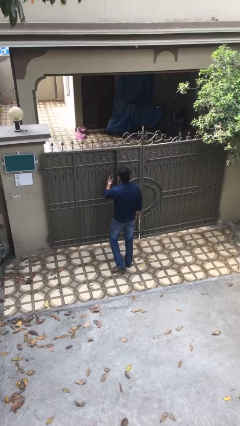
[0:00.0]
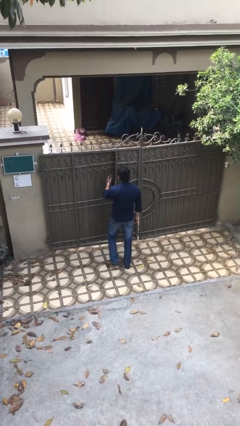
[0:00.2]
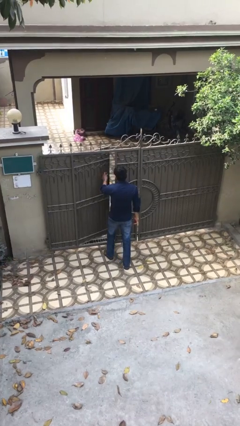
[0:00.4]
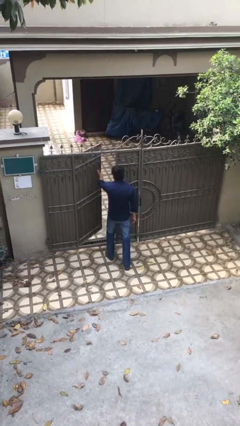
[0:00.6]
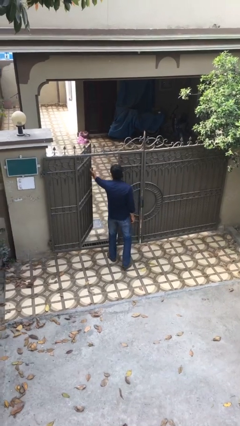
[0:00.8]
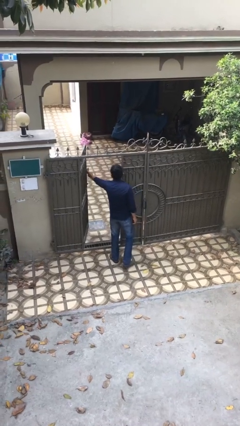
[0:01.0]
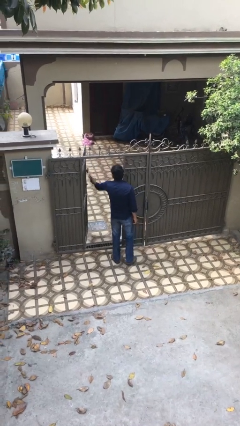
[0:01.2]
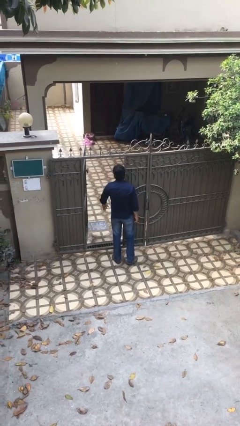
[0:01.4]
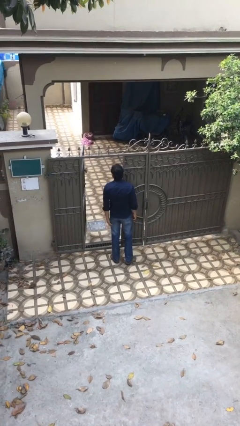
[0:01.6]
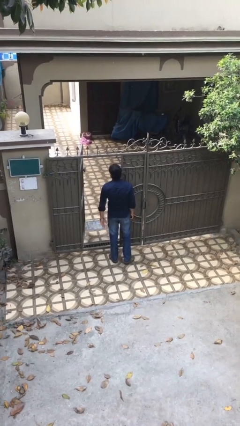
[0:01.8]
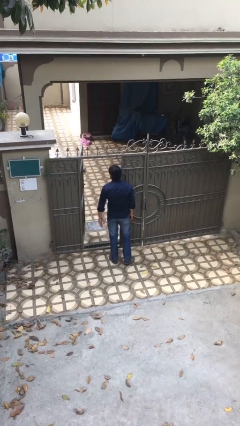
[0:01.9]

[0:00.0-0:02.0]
person opens facility door

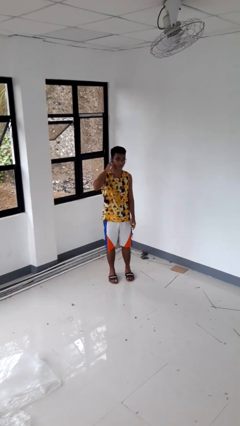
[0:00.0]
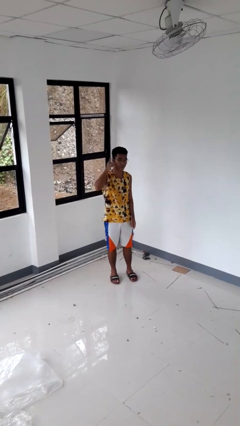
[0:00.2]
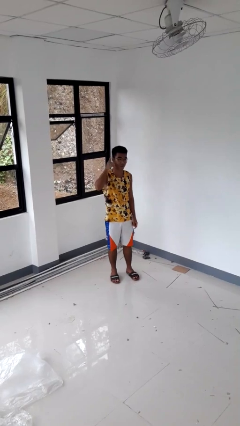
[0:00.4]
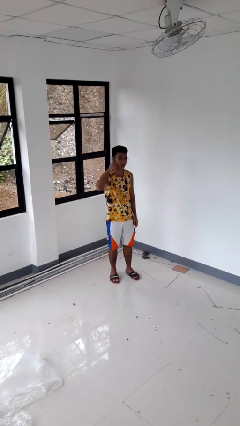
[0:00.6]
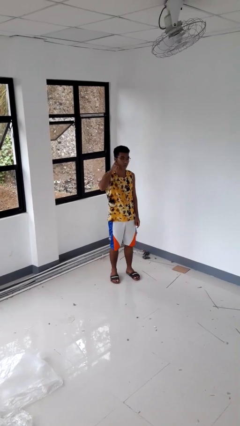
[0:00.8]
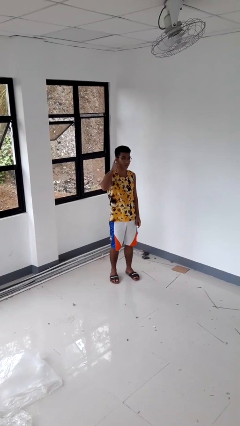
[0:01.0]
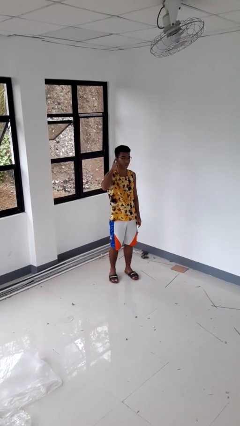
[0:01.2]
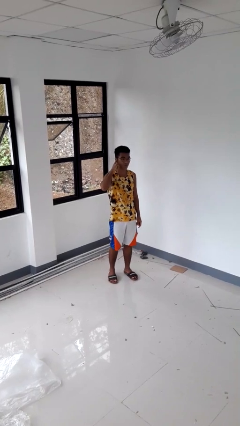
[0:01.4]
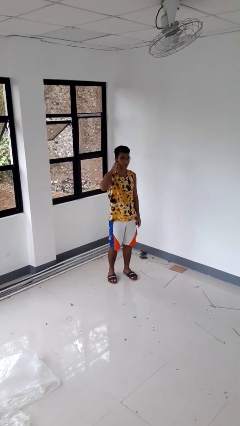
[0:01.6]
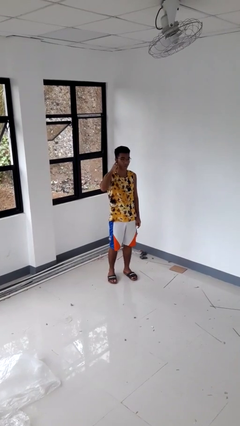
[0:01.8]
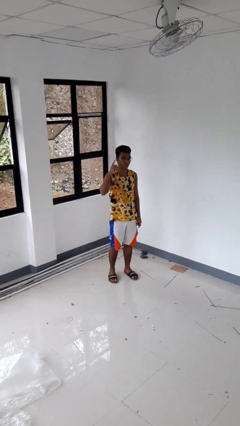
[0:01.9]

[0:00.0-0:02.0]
person gestures listen closely

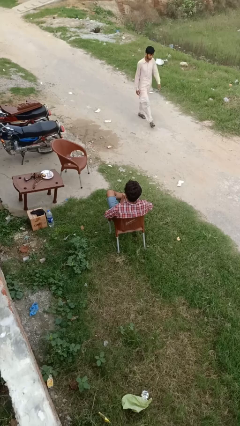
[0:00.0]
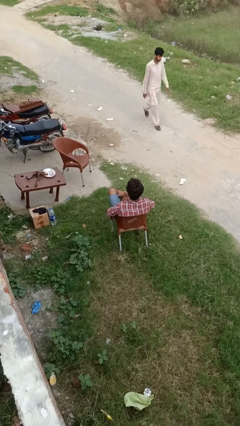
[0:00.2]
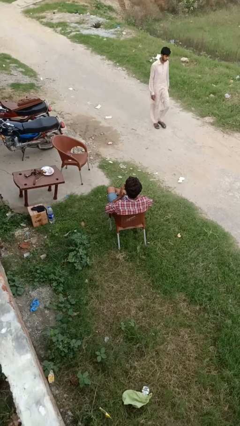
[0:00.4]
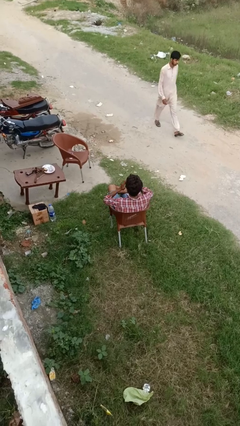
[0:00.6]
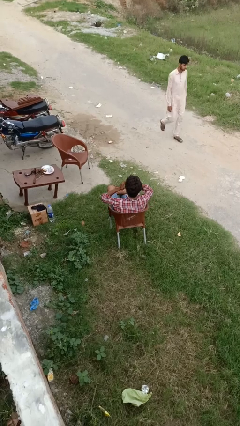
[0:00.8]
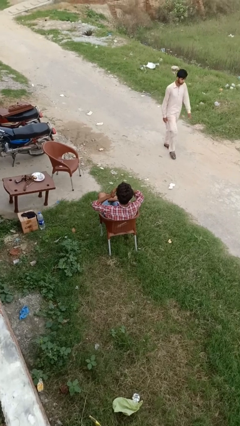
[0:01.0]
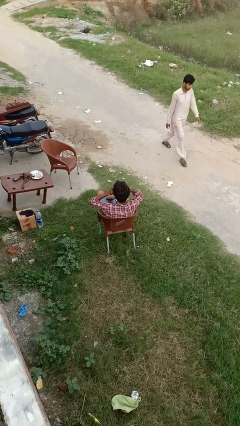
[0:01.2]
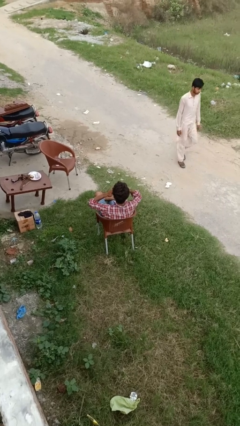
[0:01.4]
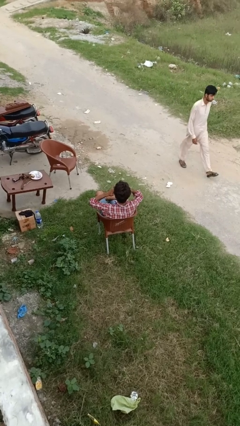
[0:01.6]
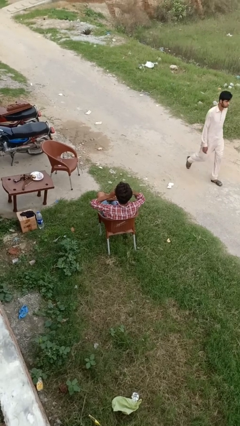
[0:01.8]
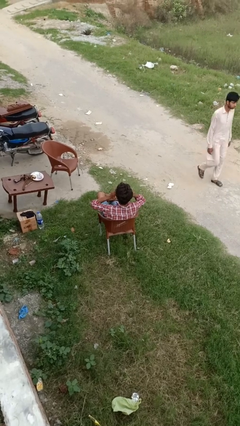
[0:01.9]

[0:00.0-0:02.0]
person applies sunscreen

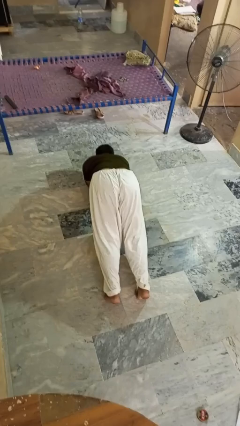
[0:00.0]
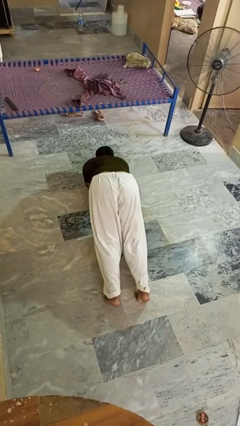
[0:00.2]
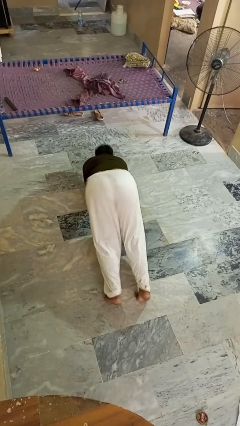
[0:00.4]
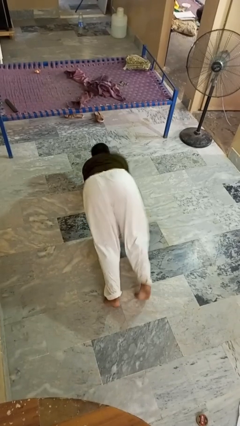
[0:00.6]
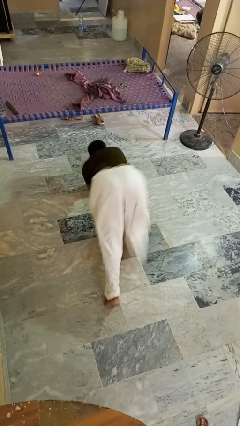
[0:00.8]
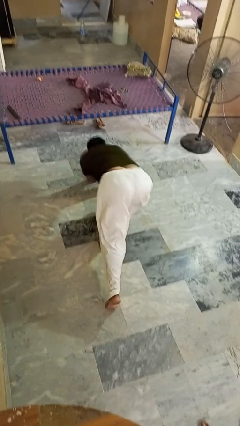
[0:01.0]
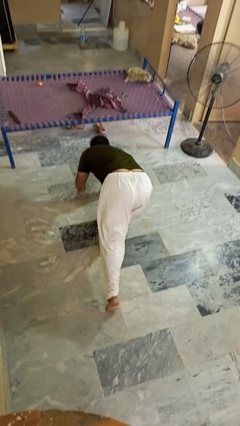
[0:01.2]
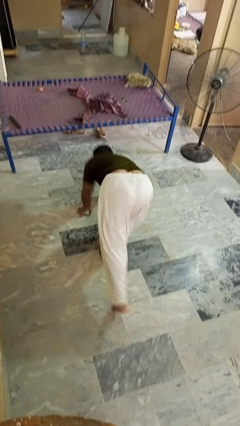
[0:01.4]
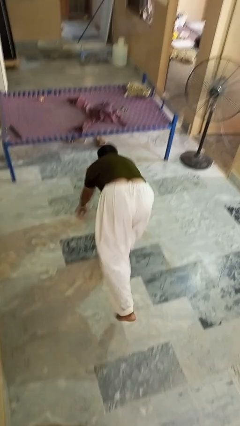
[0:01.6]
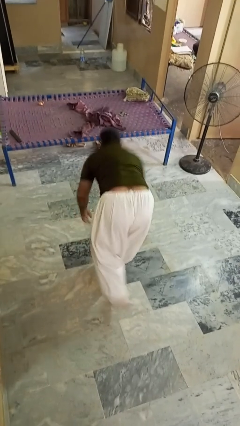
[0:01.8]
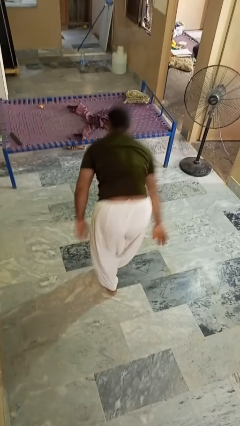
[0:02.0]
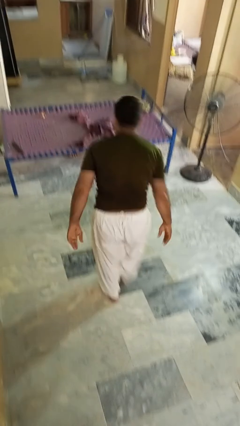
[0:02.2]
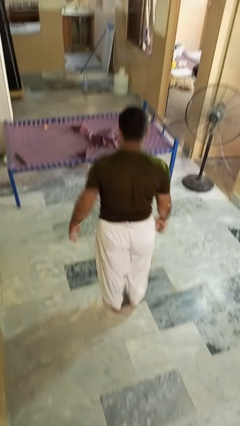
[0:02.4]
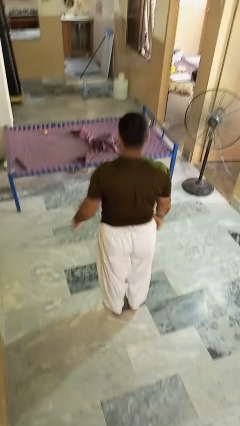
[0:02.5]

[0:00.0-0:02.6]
person stands up from floor

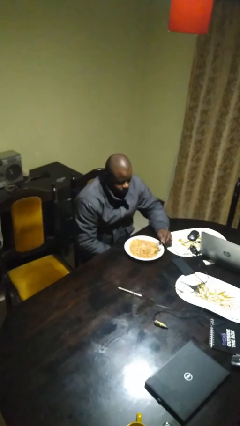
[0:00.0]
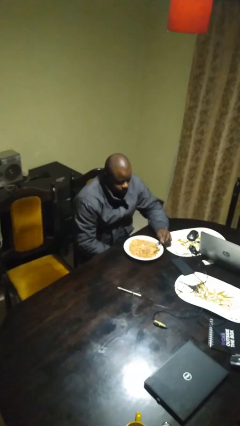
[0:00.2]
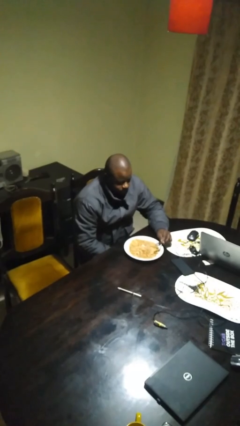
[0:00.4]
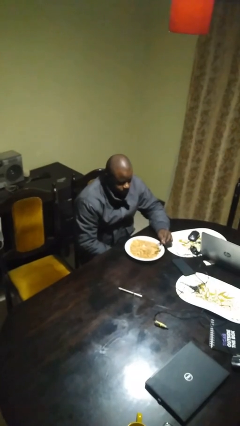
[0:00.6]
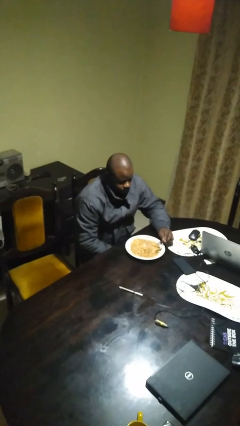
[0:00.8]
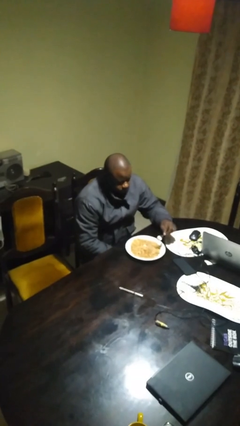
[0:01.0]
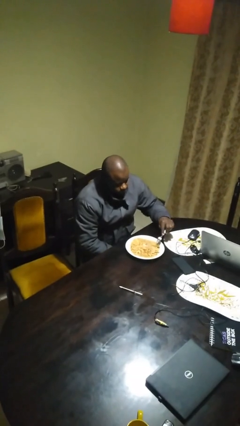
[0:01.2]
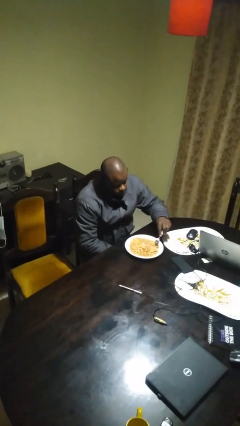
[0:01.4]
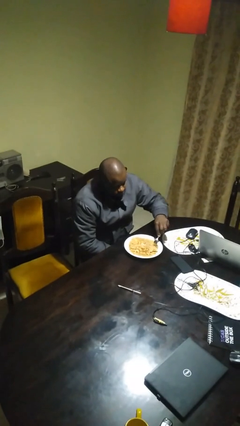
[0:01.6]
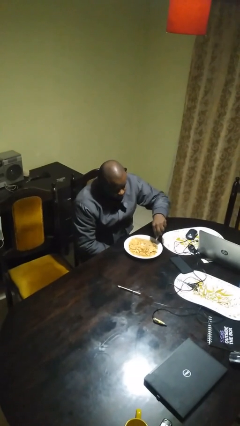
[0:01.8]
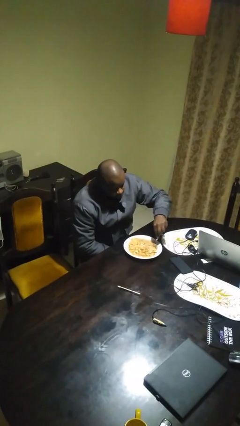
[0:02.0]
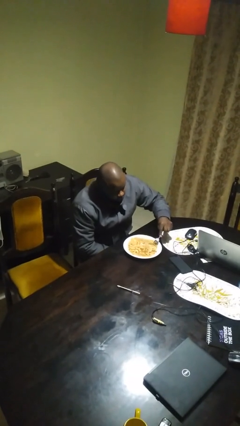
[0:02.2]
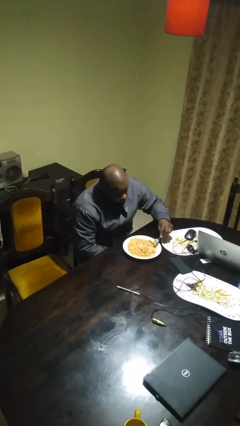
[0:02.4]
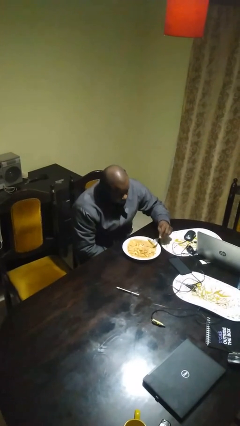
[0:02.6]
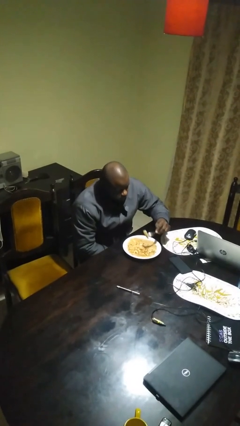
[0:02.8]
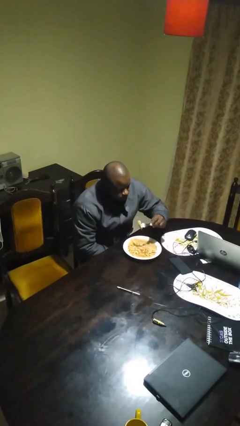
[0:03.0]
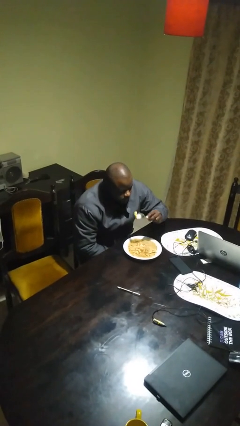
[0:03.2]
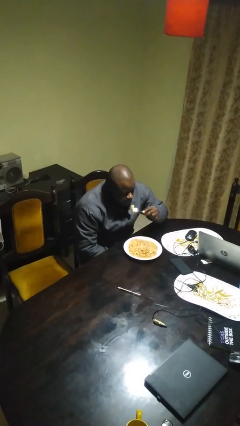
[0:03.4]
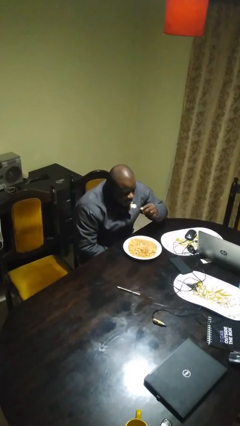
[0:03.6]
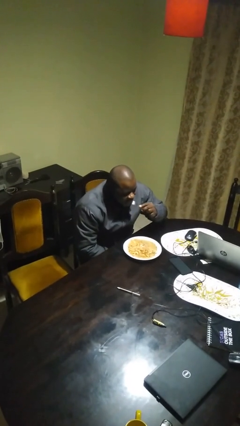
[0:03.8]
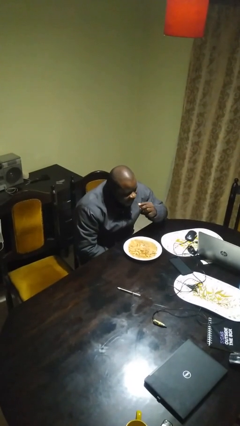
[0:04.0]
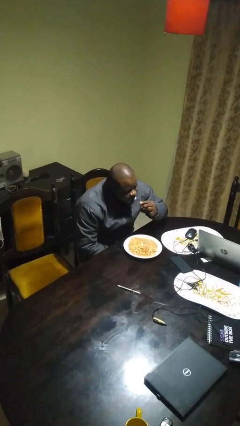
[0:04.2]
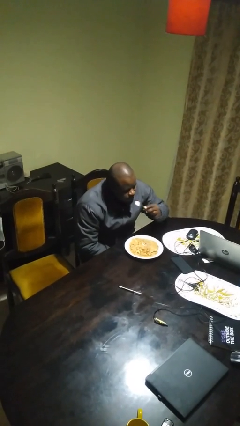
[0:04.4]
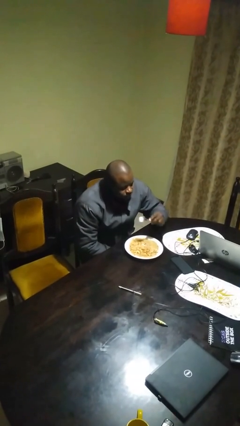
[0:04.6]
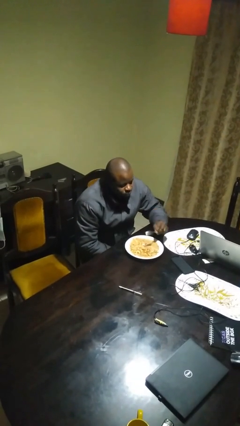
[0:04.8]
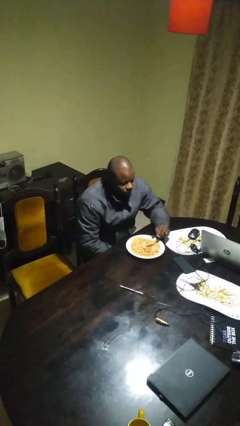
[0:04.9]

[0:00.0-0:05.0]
person eats with utensil

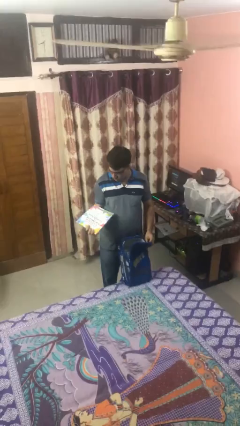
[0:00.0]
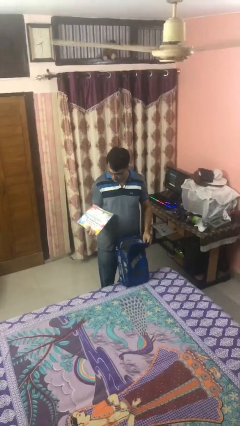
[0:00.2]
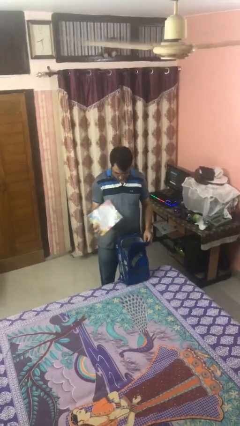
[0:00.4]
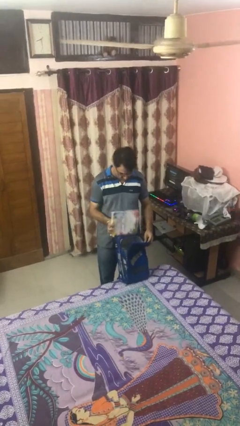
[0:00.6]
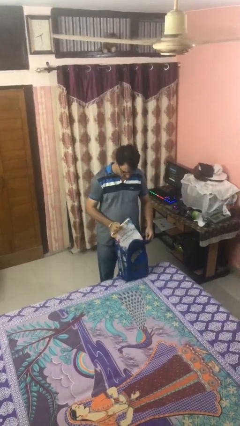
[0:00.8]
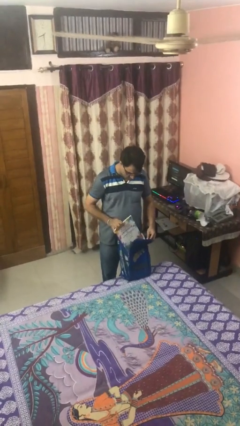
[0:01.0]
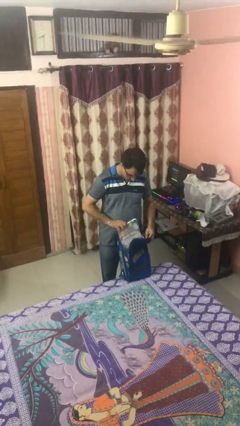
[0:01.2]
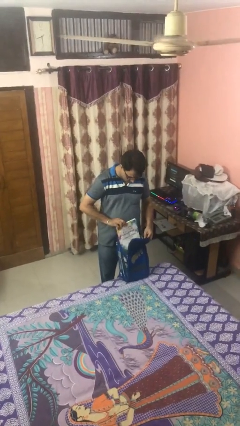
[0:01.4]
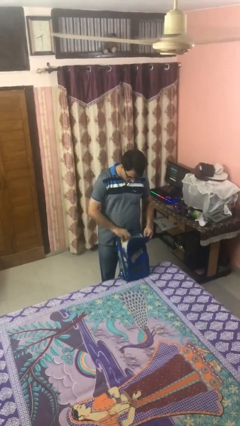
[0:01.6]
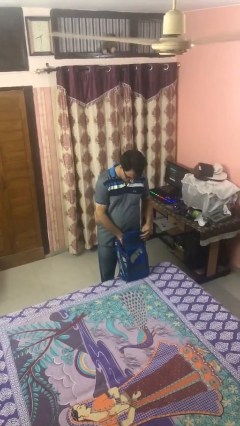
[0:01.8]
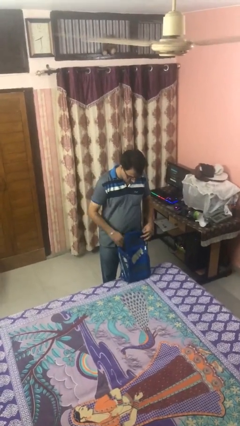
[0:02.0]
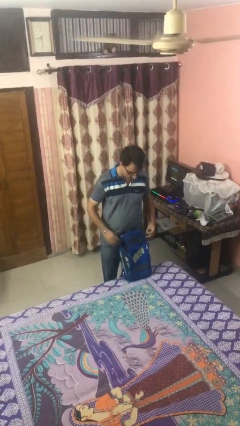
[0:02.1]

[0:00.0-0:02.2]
person puts object into backpack

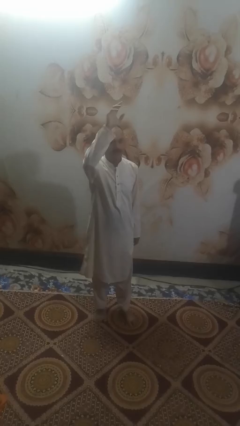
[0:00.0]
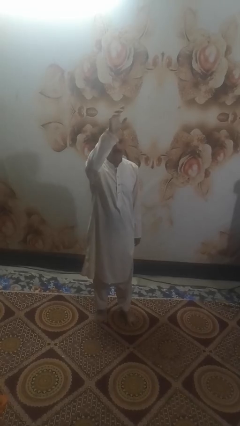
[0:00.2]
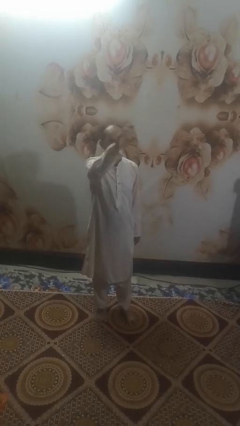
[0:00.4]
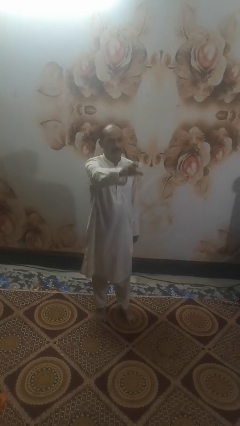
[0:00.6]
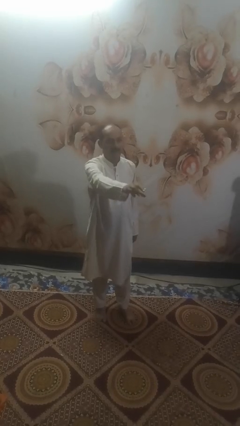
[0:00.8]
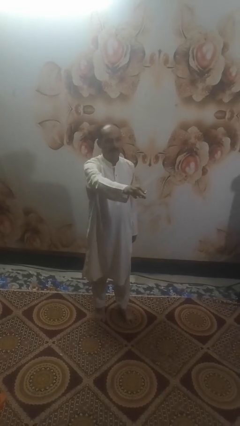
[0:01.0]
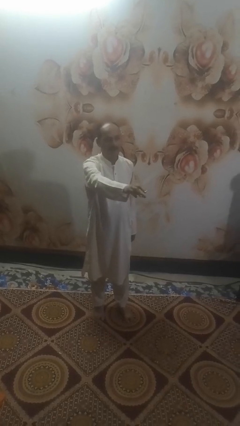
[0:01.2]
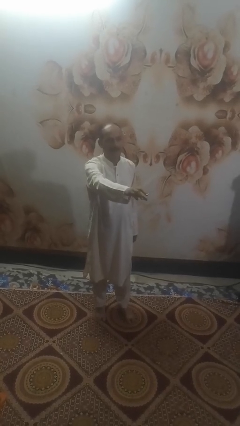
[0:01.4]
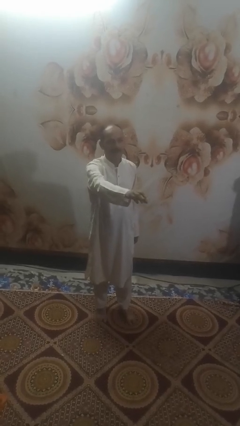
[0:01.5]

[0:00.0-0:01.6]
person gestures swipe down

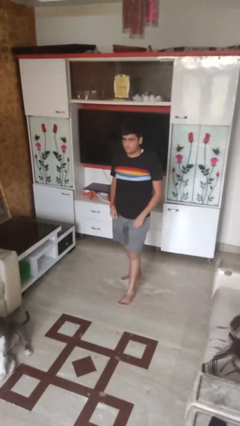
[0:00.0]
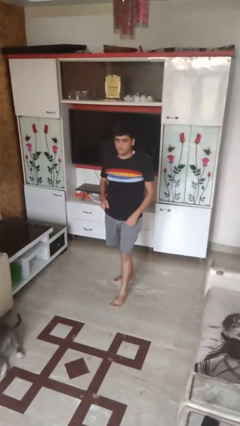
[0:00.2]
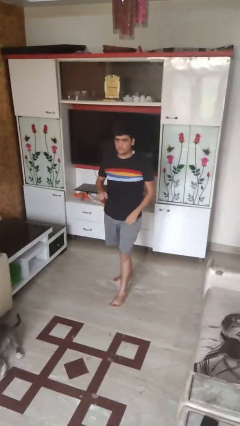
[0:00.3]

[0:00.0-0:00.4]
person punches
